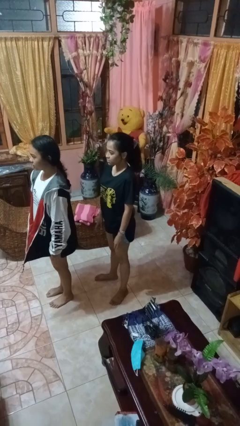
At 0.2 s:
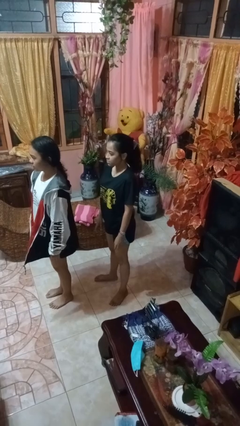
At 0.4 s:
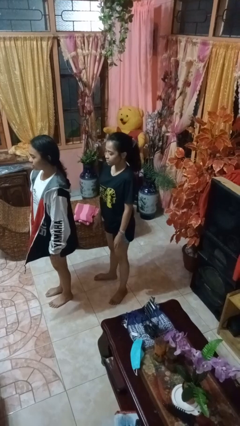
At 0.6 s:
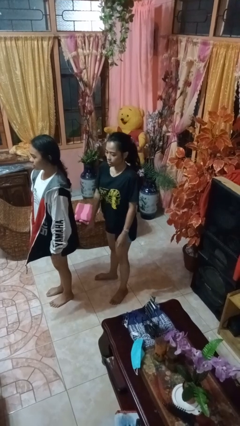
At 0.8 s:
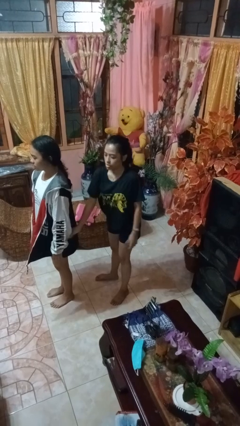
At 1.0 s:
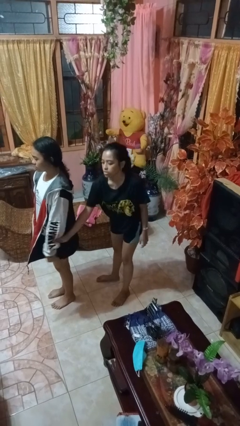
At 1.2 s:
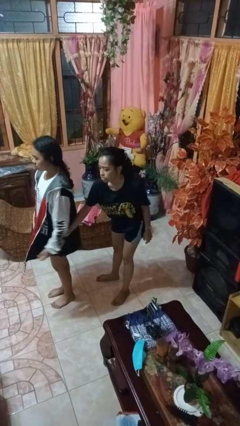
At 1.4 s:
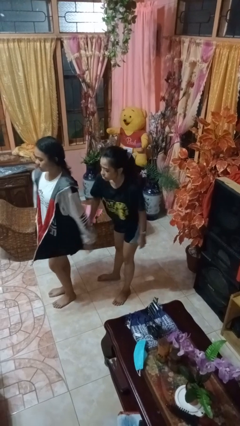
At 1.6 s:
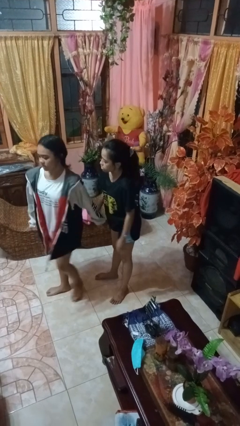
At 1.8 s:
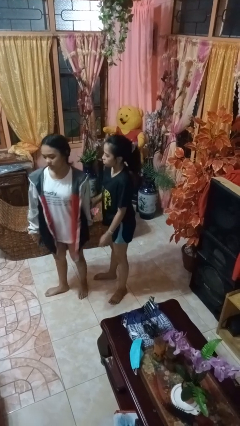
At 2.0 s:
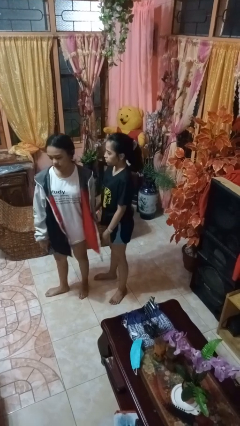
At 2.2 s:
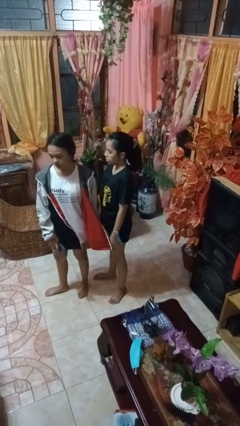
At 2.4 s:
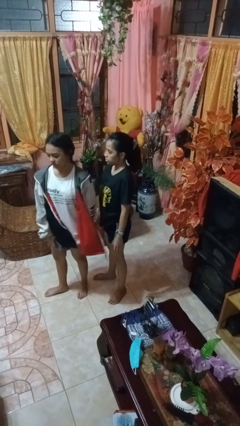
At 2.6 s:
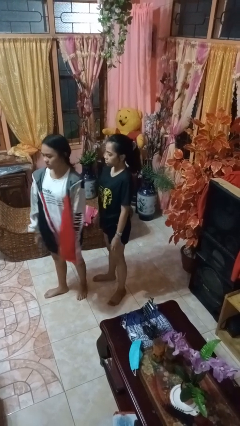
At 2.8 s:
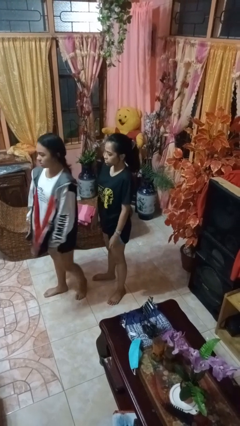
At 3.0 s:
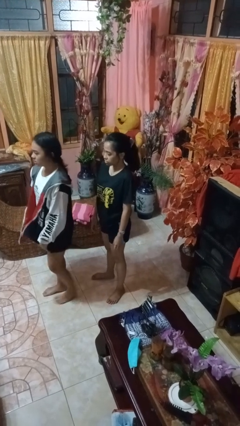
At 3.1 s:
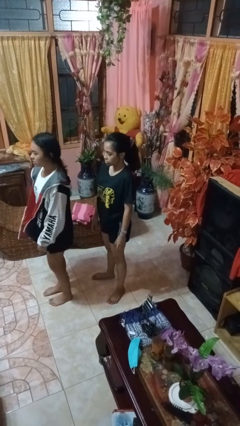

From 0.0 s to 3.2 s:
person grabs person by forearm

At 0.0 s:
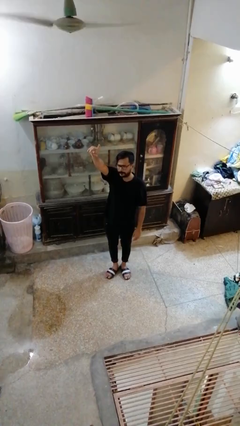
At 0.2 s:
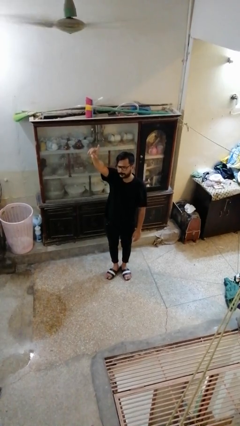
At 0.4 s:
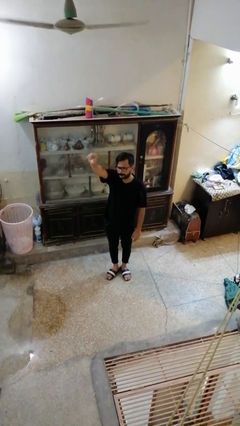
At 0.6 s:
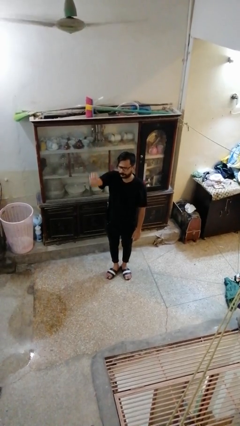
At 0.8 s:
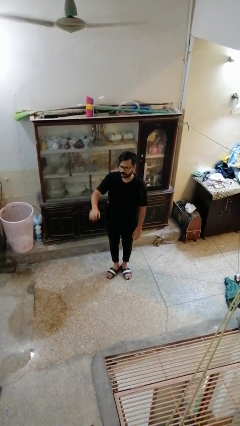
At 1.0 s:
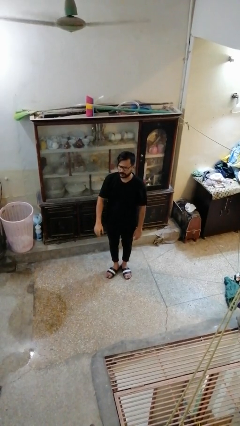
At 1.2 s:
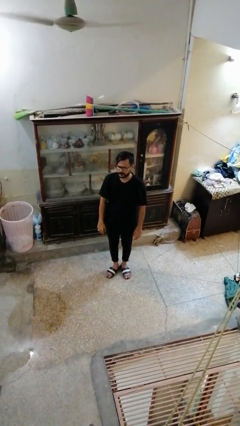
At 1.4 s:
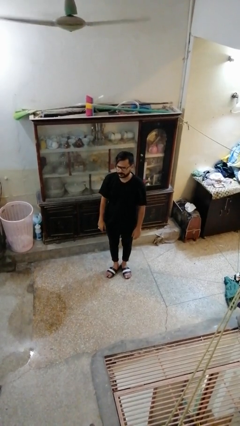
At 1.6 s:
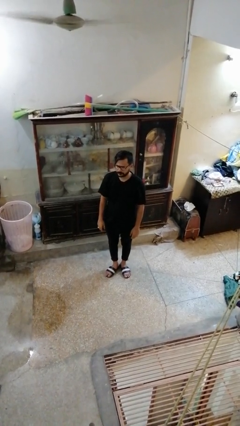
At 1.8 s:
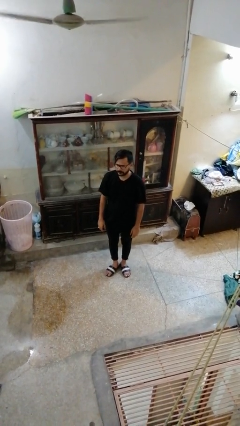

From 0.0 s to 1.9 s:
person gestures lower hand

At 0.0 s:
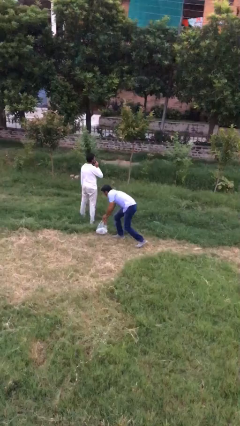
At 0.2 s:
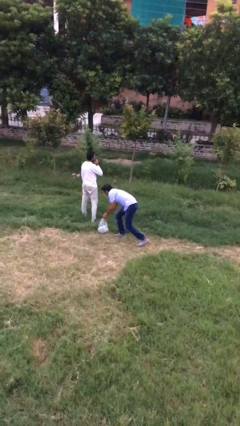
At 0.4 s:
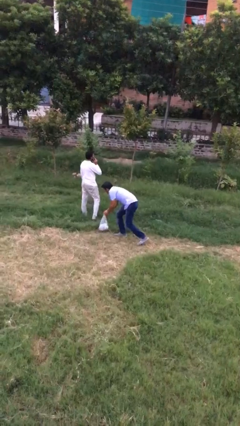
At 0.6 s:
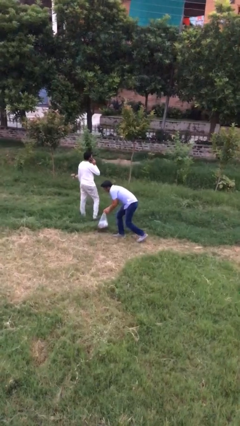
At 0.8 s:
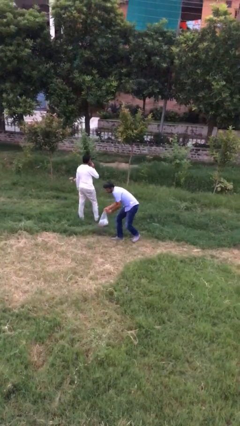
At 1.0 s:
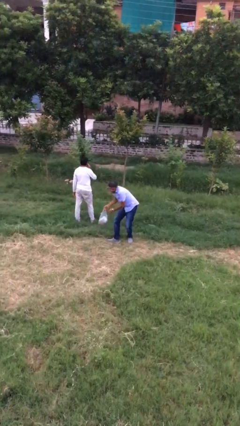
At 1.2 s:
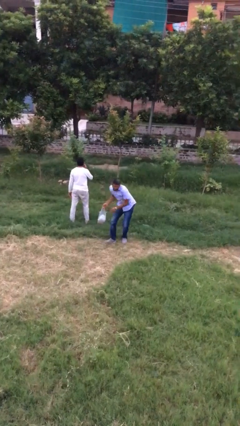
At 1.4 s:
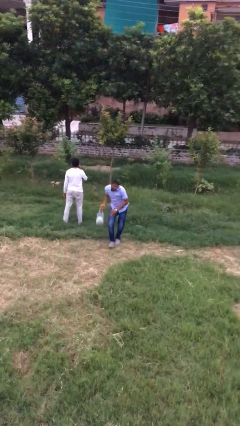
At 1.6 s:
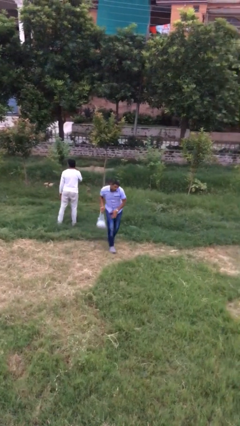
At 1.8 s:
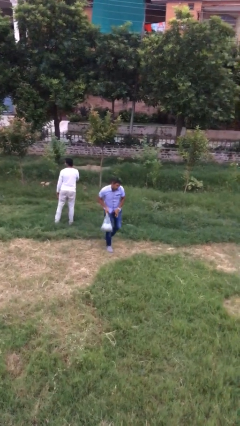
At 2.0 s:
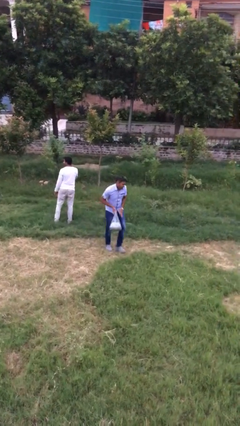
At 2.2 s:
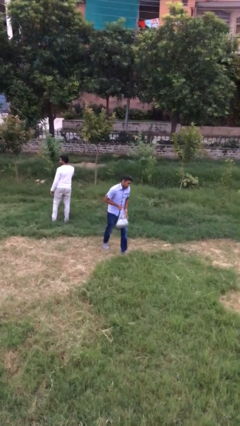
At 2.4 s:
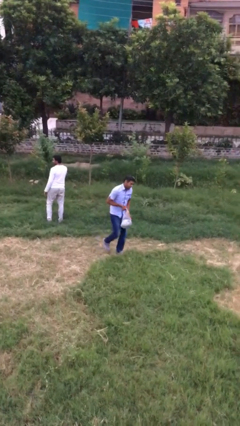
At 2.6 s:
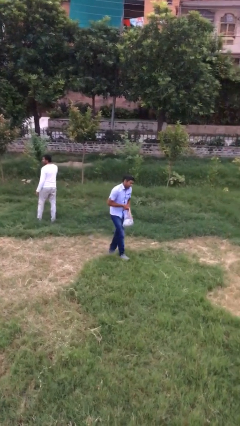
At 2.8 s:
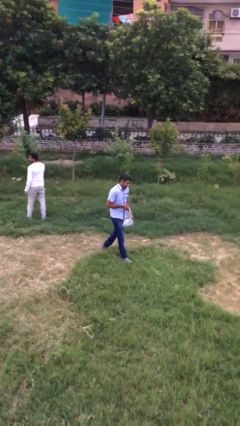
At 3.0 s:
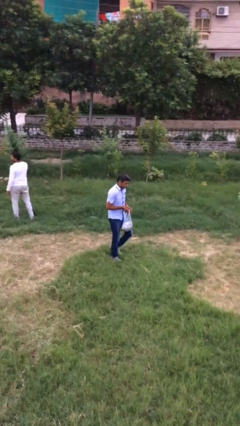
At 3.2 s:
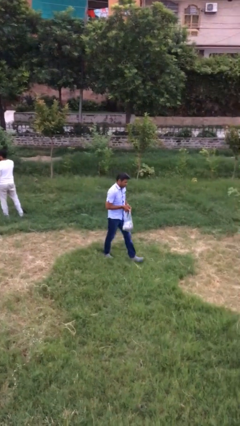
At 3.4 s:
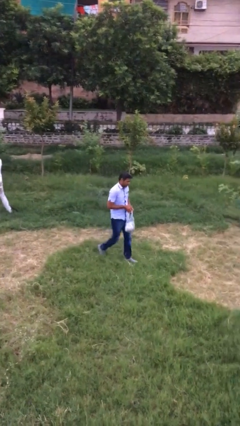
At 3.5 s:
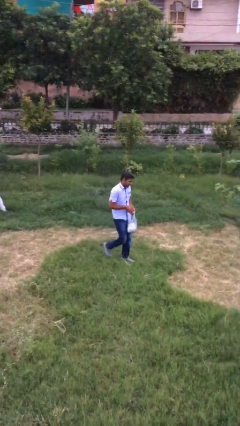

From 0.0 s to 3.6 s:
person steals object from person

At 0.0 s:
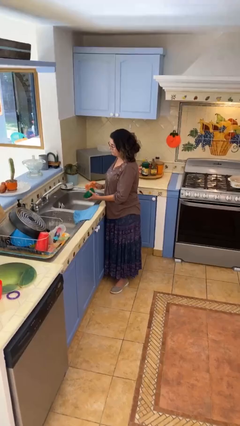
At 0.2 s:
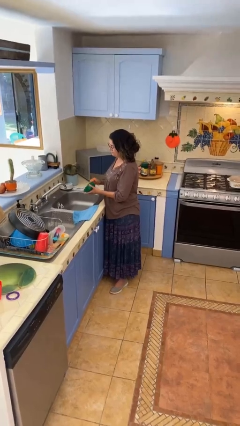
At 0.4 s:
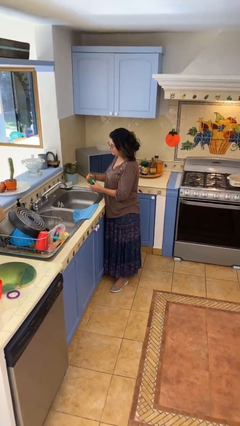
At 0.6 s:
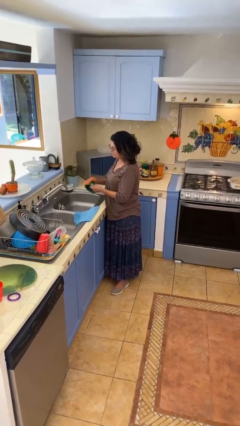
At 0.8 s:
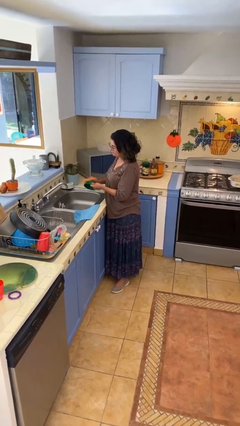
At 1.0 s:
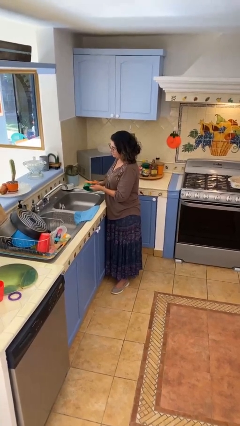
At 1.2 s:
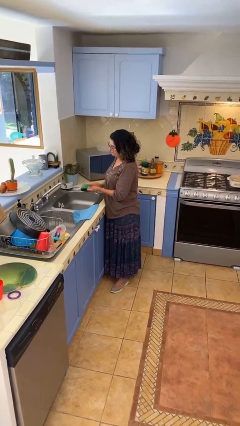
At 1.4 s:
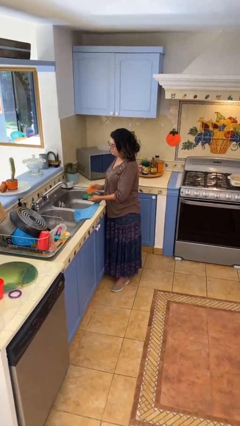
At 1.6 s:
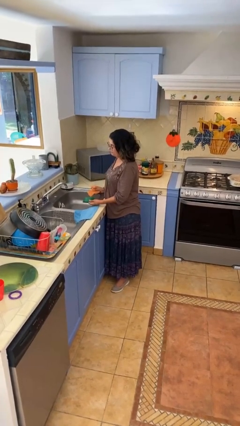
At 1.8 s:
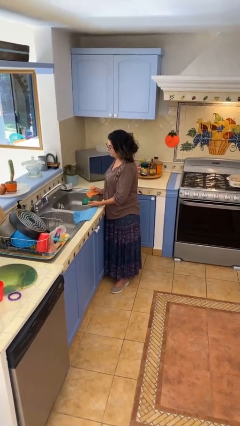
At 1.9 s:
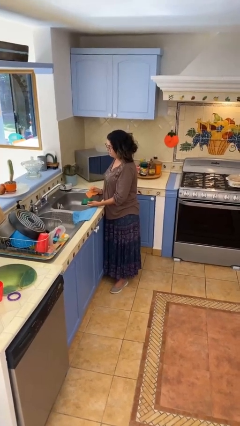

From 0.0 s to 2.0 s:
person washes dish

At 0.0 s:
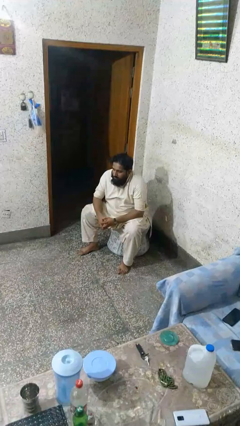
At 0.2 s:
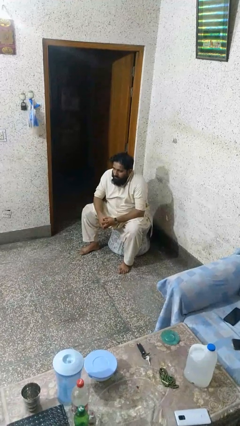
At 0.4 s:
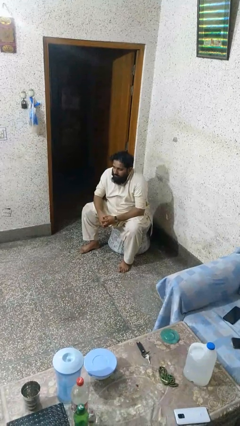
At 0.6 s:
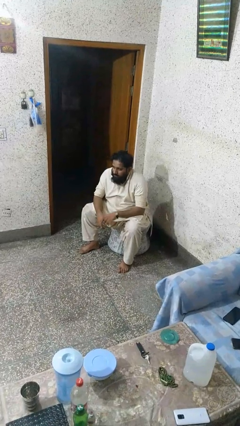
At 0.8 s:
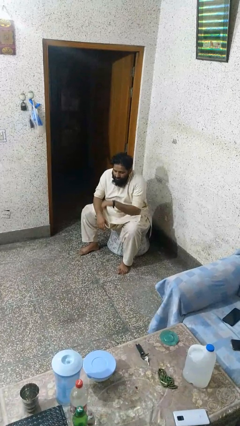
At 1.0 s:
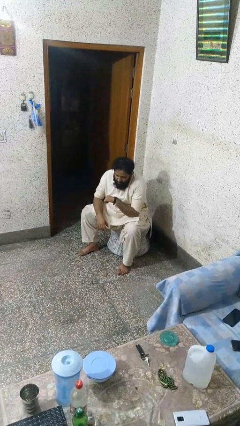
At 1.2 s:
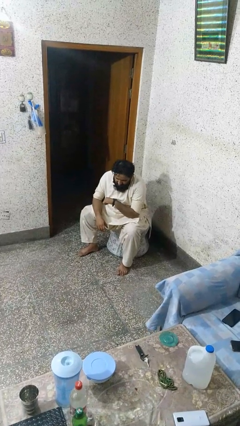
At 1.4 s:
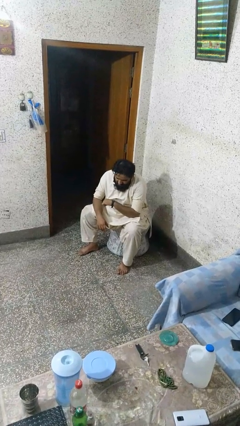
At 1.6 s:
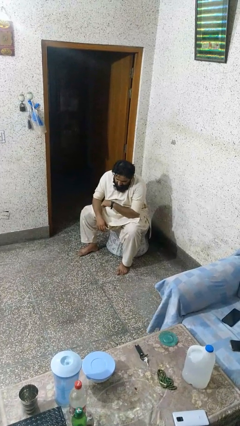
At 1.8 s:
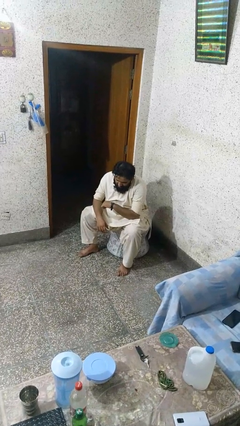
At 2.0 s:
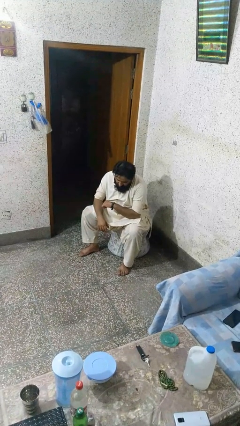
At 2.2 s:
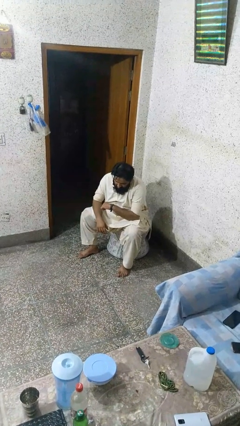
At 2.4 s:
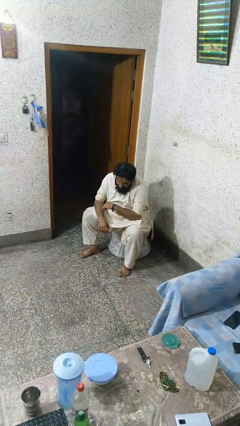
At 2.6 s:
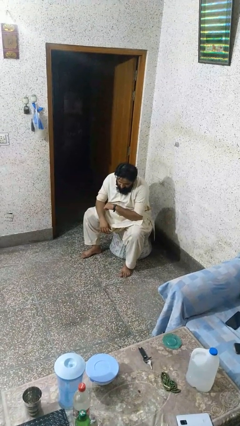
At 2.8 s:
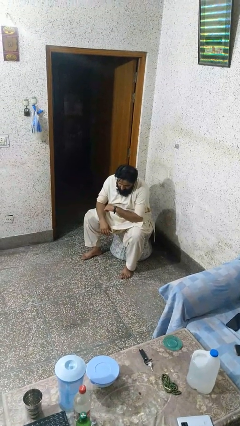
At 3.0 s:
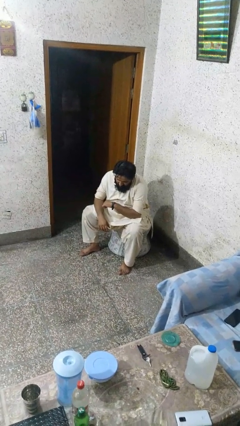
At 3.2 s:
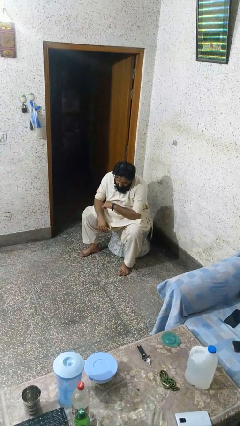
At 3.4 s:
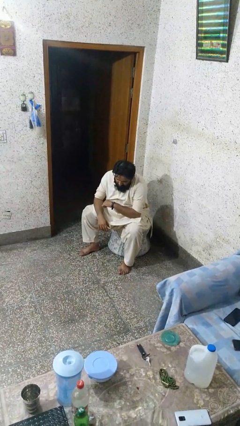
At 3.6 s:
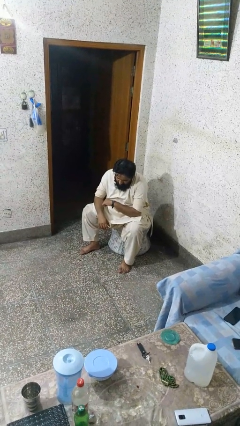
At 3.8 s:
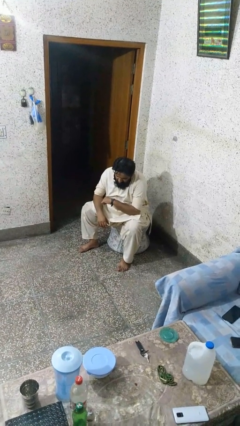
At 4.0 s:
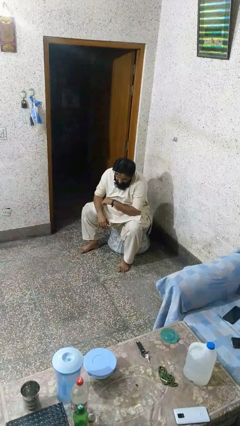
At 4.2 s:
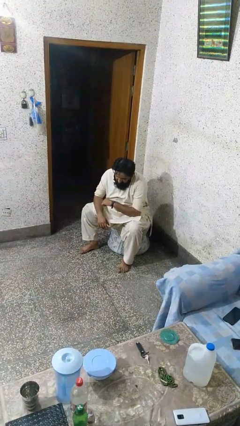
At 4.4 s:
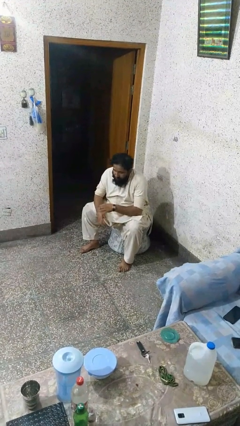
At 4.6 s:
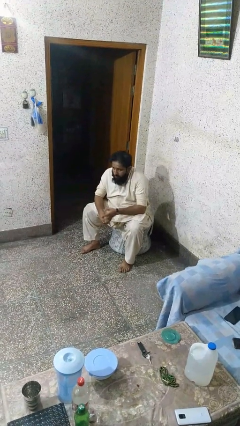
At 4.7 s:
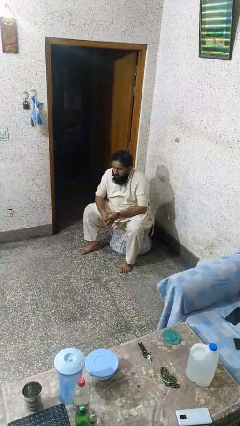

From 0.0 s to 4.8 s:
person looks at wristwatch

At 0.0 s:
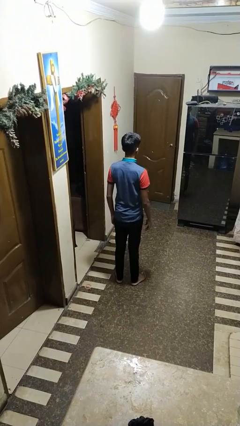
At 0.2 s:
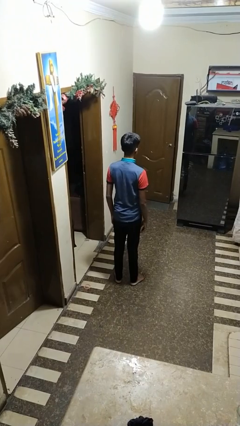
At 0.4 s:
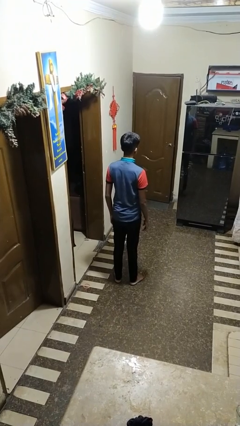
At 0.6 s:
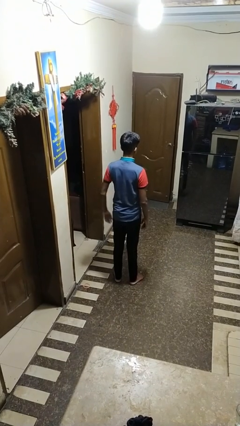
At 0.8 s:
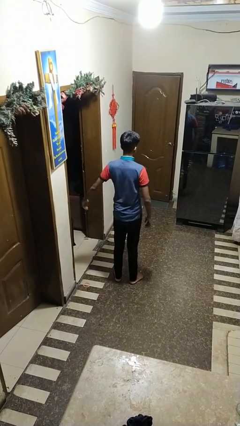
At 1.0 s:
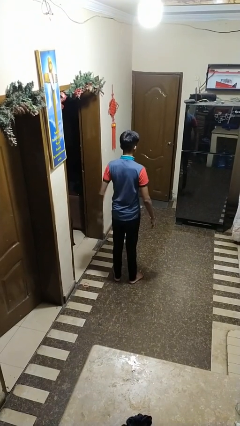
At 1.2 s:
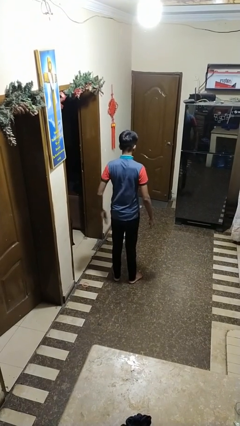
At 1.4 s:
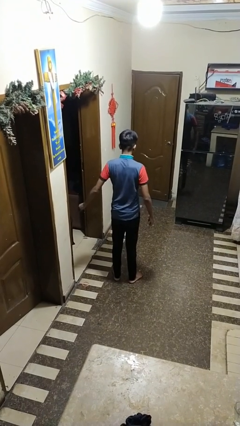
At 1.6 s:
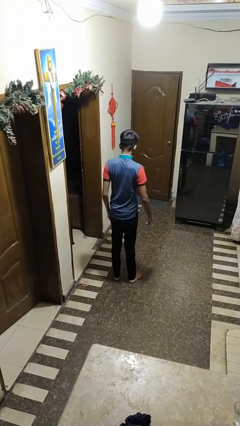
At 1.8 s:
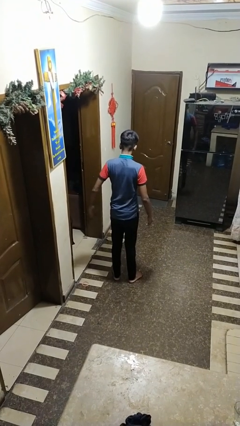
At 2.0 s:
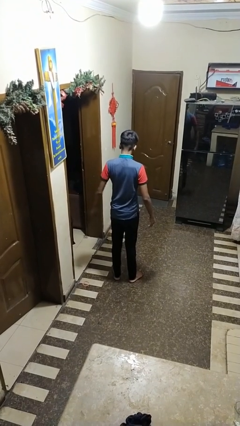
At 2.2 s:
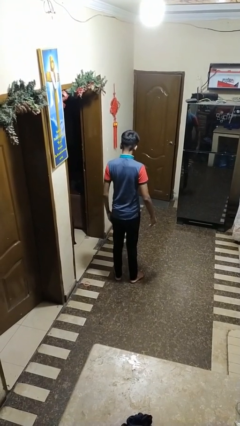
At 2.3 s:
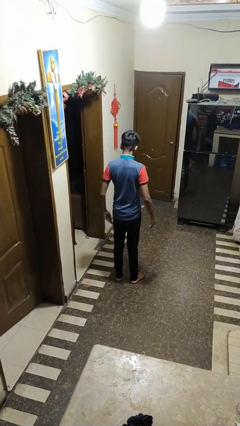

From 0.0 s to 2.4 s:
person slaps hands on thighs
